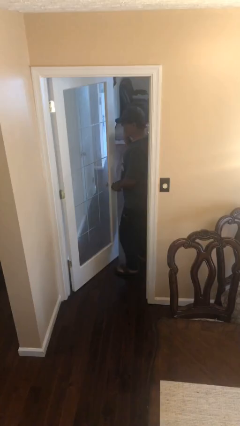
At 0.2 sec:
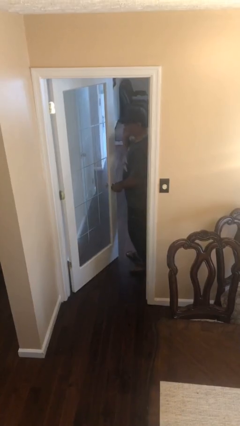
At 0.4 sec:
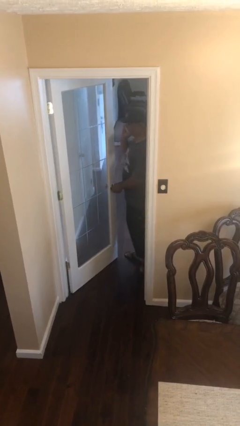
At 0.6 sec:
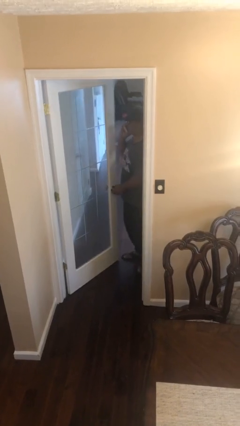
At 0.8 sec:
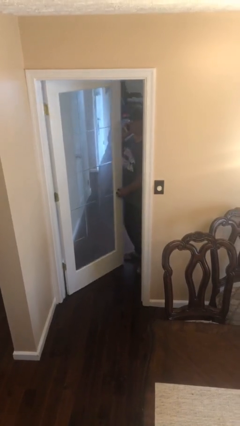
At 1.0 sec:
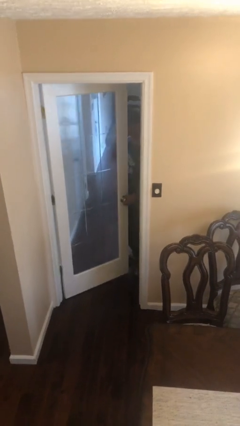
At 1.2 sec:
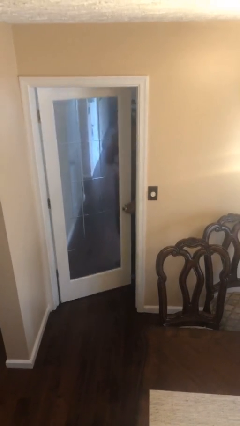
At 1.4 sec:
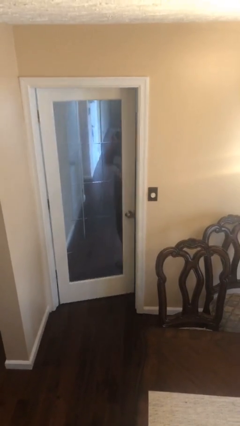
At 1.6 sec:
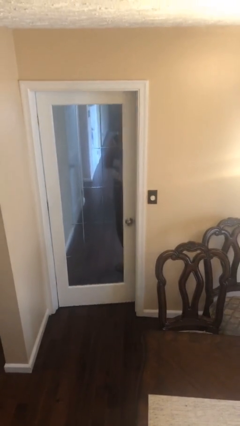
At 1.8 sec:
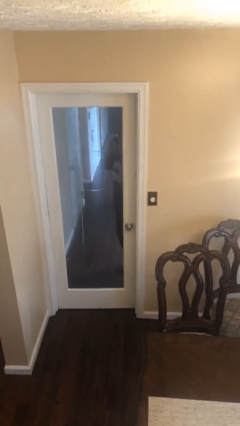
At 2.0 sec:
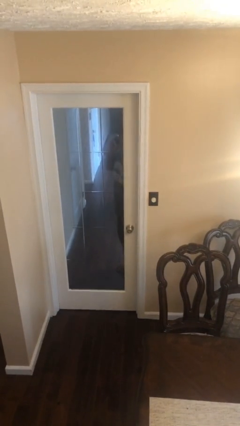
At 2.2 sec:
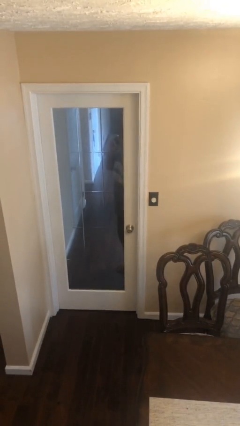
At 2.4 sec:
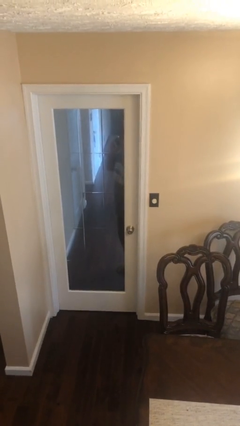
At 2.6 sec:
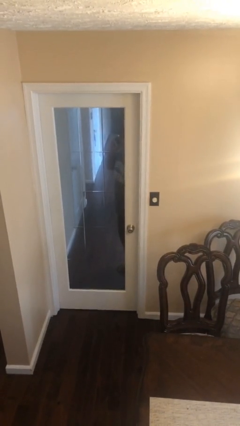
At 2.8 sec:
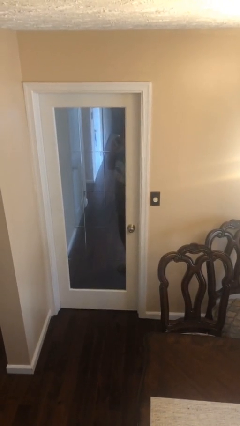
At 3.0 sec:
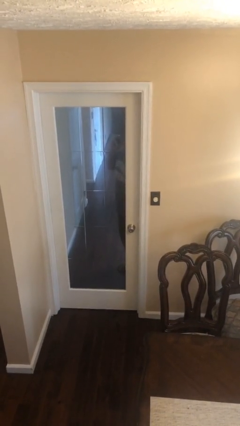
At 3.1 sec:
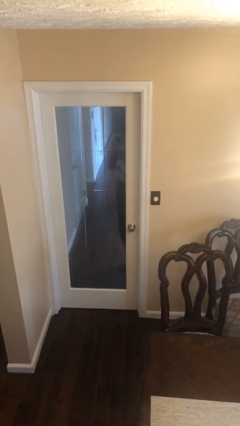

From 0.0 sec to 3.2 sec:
person closes facility door

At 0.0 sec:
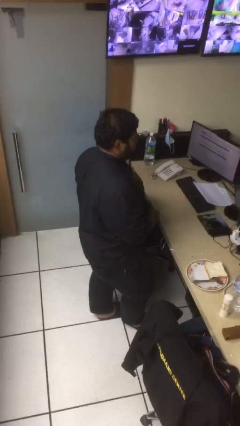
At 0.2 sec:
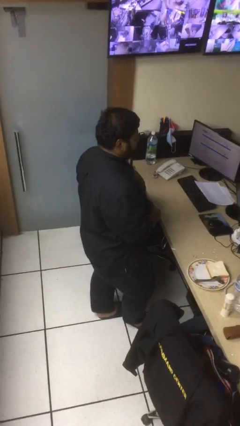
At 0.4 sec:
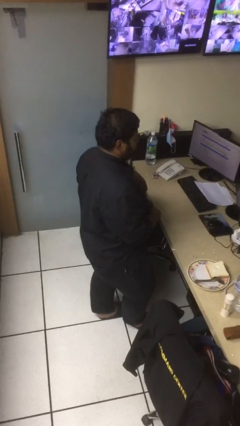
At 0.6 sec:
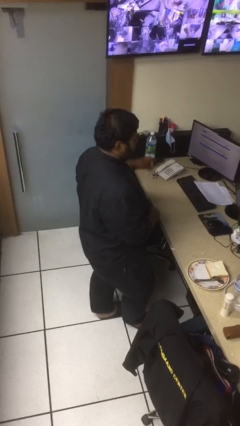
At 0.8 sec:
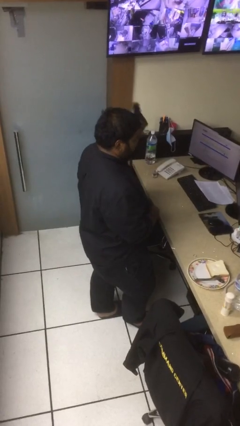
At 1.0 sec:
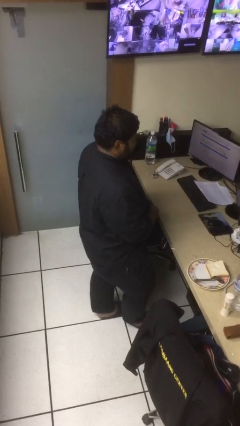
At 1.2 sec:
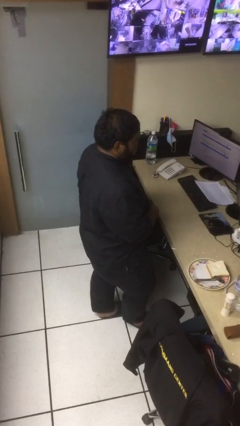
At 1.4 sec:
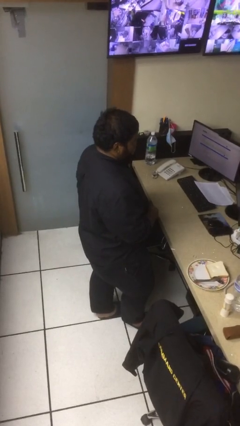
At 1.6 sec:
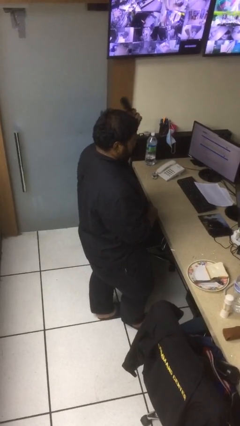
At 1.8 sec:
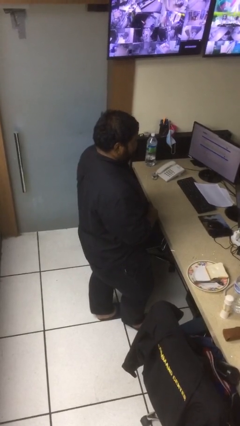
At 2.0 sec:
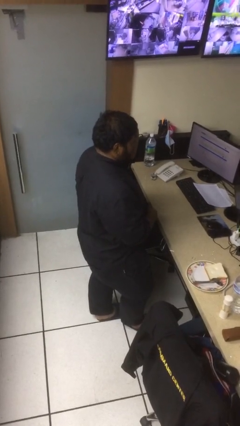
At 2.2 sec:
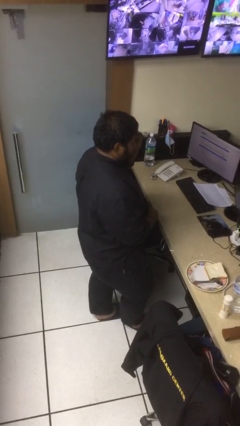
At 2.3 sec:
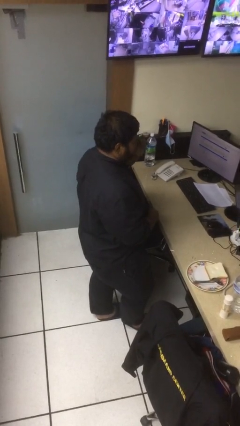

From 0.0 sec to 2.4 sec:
person brushes hair

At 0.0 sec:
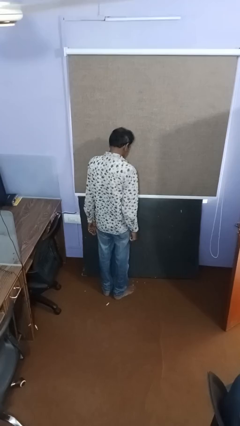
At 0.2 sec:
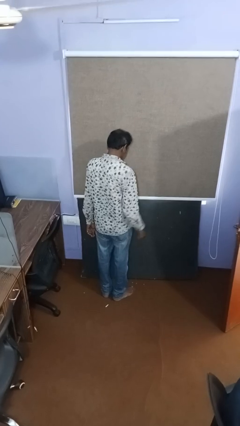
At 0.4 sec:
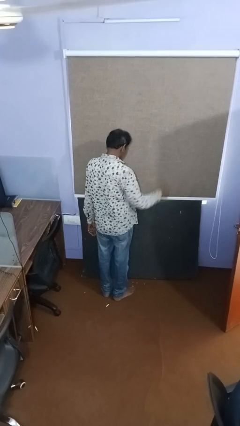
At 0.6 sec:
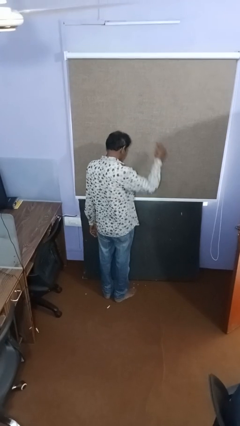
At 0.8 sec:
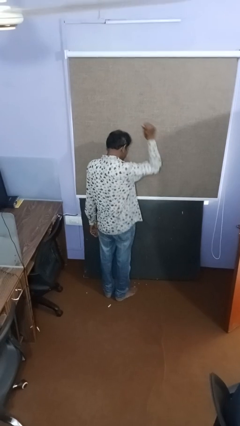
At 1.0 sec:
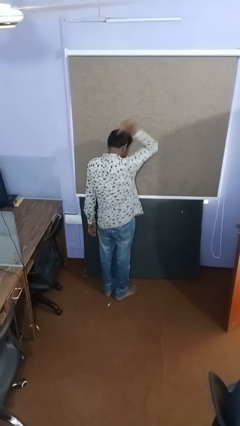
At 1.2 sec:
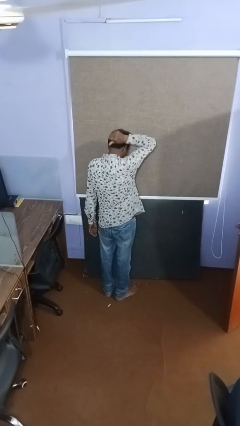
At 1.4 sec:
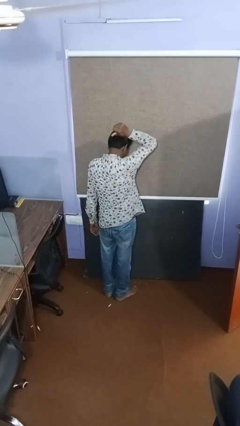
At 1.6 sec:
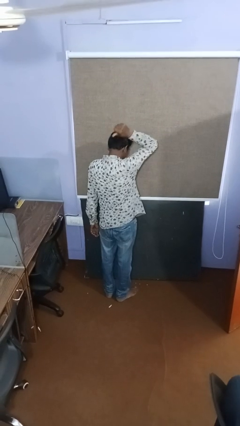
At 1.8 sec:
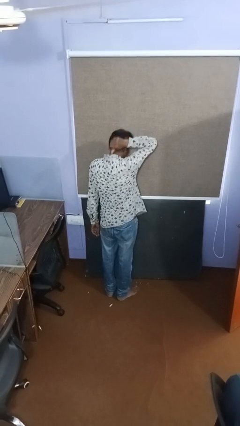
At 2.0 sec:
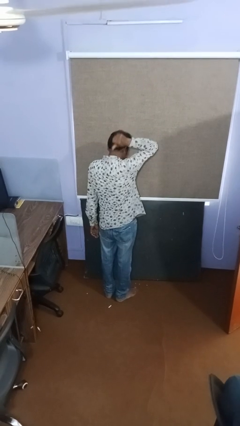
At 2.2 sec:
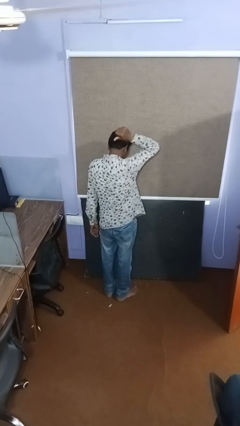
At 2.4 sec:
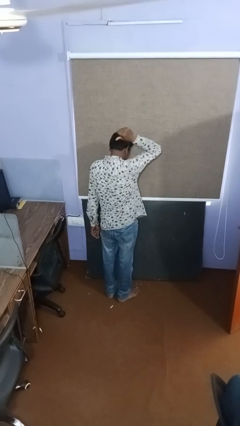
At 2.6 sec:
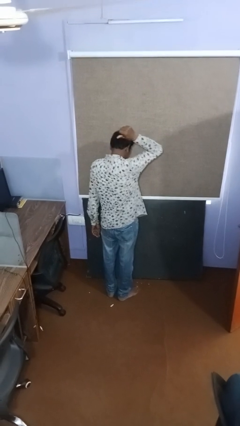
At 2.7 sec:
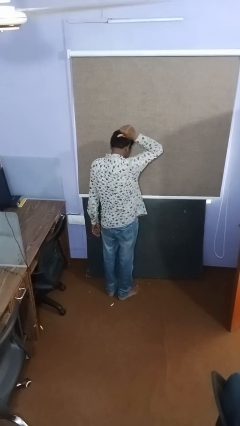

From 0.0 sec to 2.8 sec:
person gestures thumbs up

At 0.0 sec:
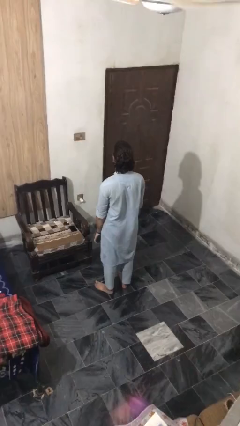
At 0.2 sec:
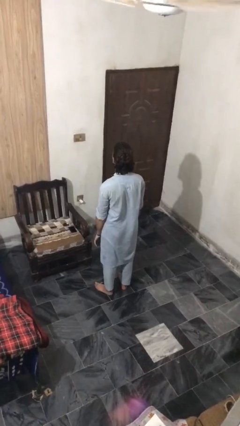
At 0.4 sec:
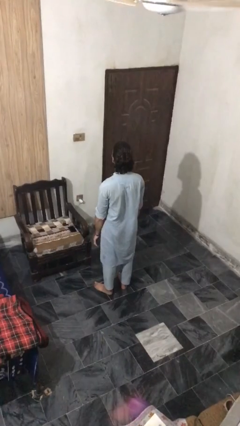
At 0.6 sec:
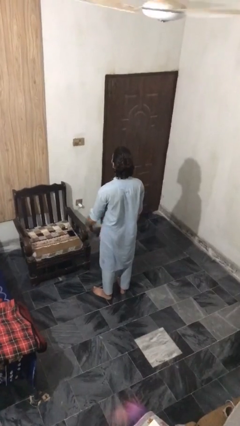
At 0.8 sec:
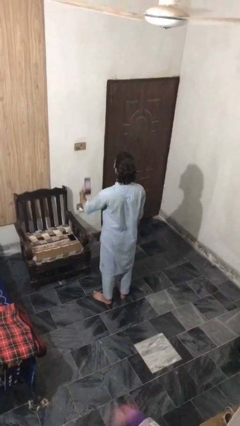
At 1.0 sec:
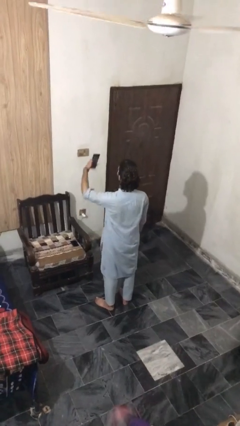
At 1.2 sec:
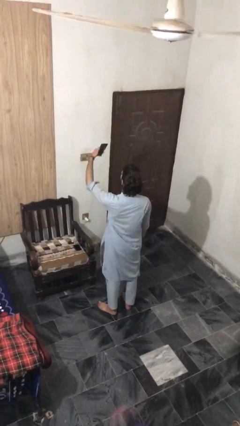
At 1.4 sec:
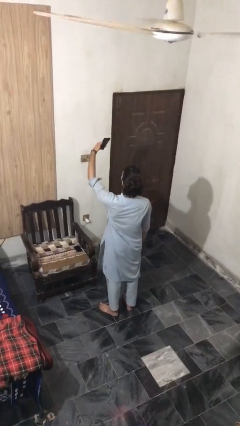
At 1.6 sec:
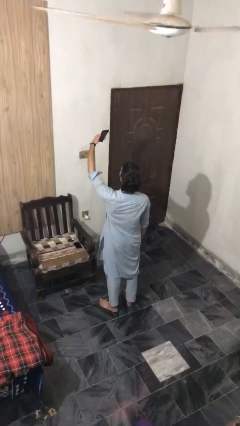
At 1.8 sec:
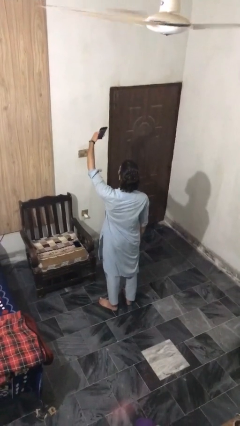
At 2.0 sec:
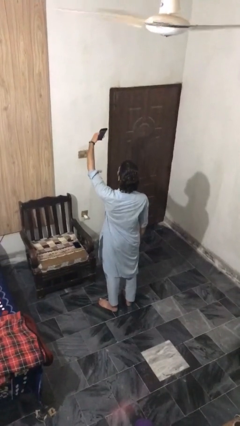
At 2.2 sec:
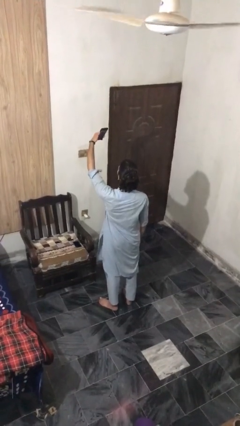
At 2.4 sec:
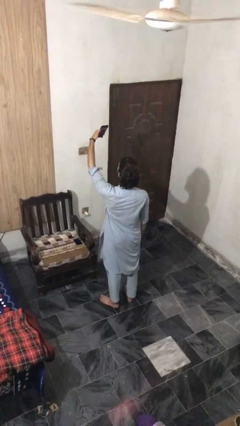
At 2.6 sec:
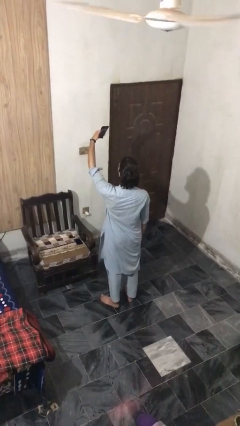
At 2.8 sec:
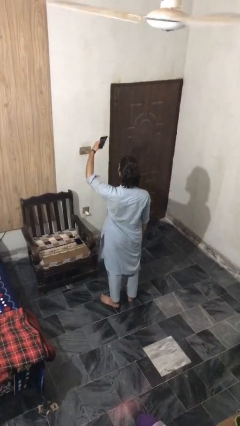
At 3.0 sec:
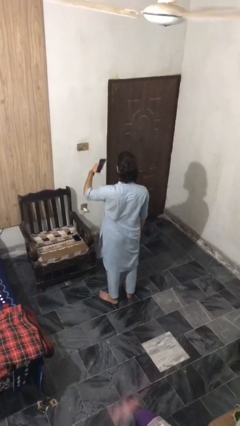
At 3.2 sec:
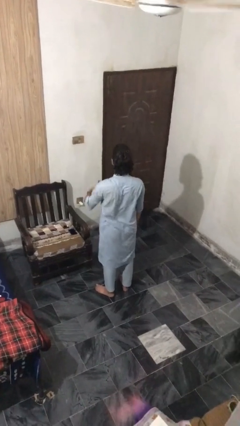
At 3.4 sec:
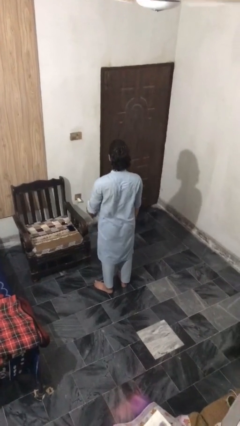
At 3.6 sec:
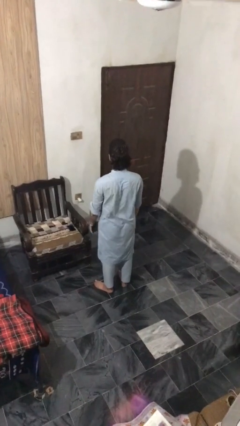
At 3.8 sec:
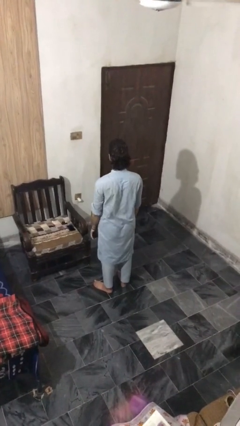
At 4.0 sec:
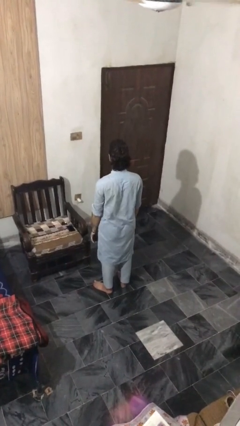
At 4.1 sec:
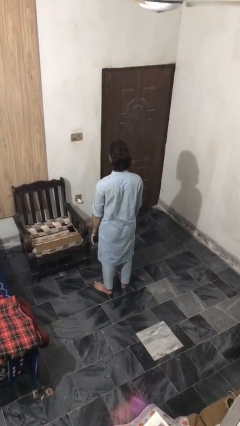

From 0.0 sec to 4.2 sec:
person takes selfie

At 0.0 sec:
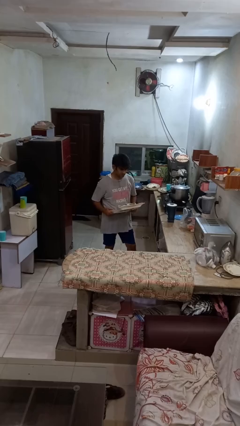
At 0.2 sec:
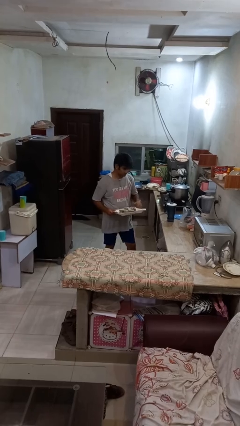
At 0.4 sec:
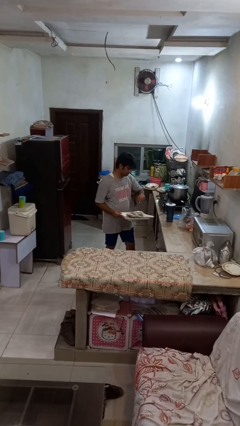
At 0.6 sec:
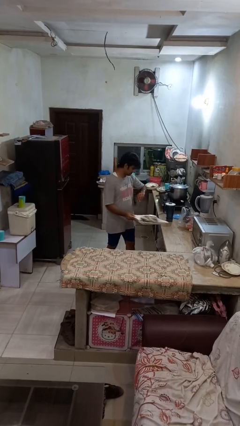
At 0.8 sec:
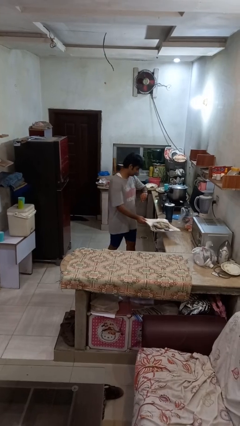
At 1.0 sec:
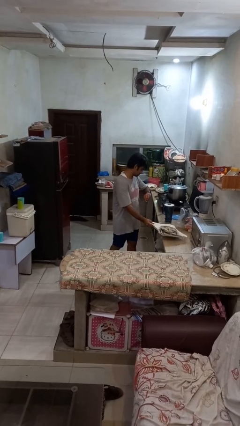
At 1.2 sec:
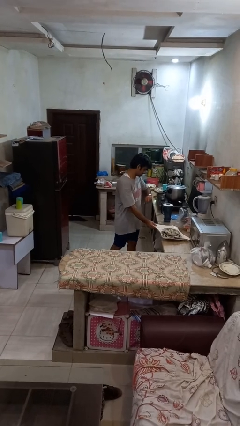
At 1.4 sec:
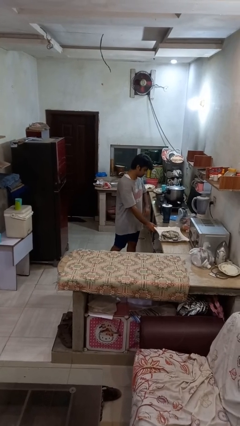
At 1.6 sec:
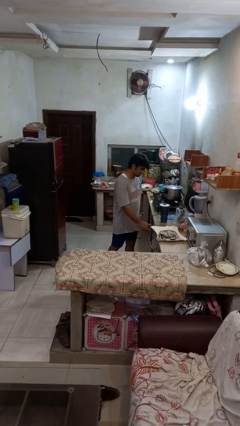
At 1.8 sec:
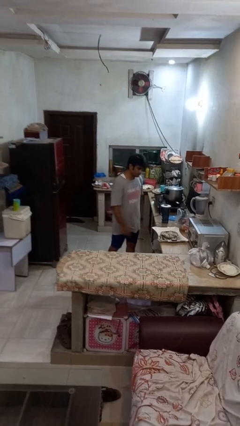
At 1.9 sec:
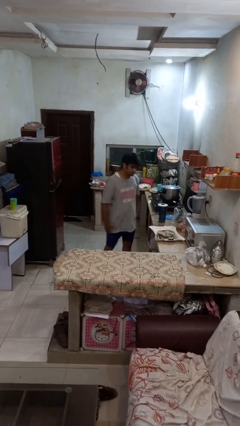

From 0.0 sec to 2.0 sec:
person puts down object on countertop

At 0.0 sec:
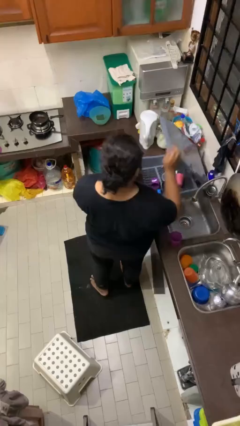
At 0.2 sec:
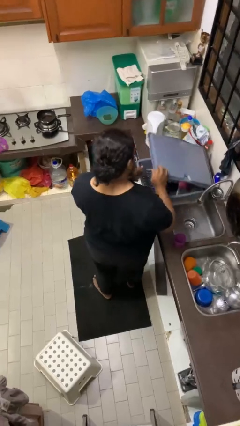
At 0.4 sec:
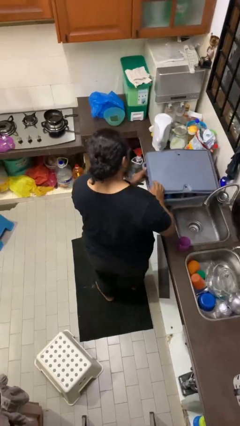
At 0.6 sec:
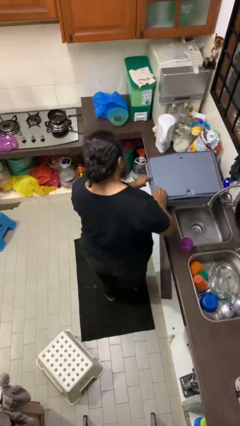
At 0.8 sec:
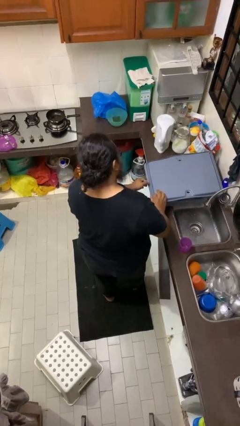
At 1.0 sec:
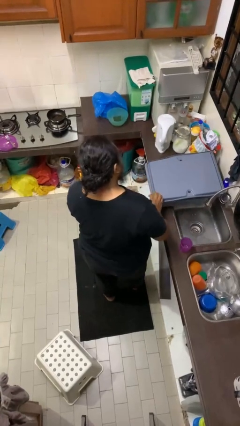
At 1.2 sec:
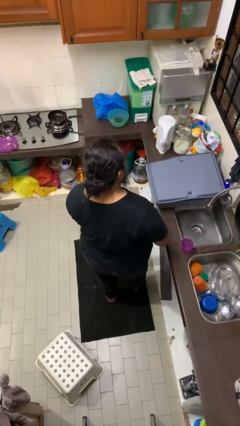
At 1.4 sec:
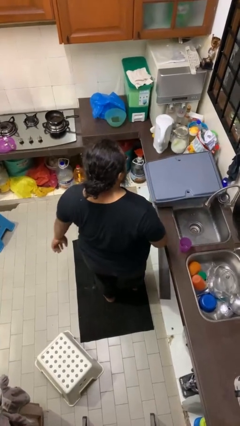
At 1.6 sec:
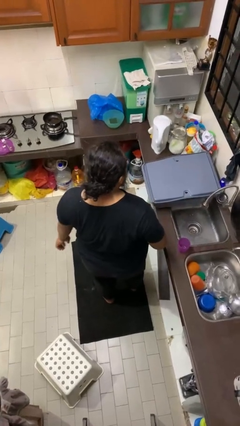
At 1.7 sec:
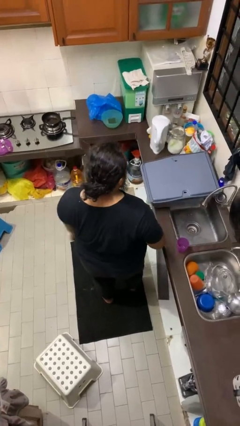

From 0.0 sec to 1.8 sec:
person closes dishwasher

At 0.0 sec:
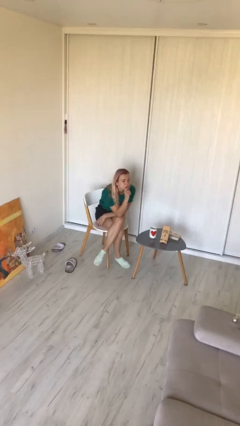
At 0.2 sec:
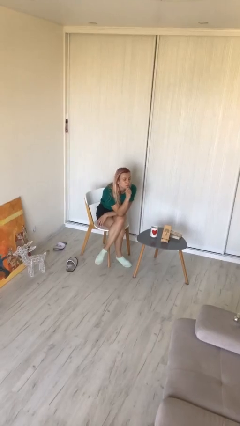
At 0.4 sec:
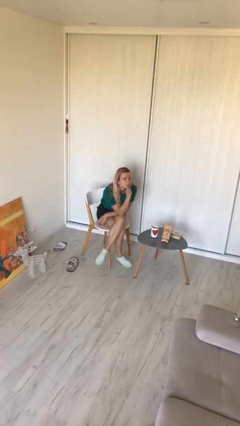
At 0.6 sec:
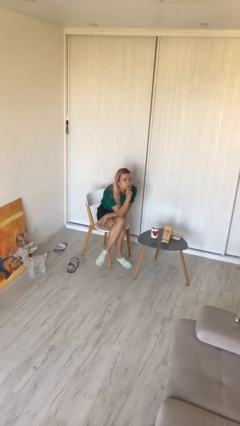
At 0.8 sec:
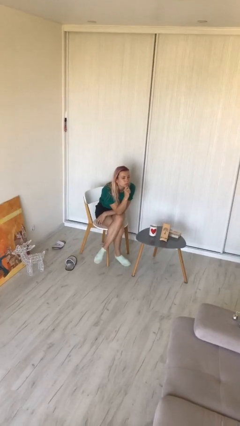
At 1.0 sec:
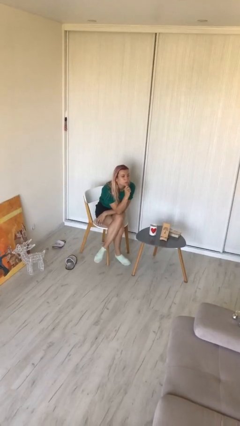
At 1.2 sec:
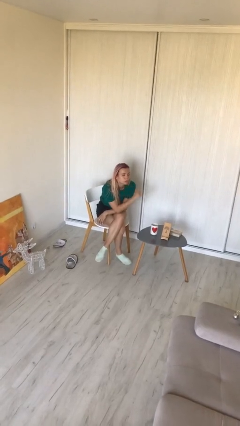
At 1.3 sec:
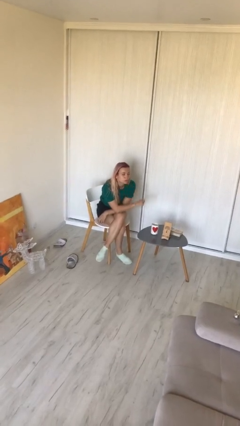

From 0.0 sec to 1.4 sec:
person strokes chin
